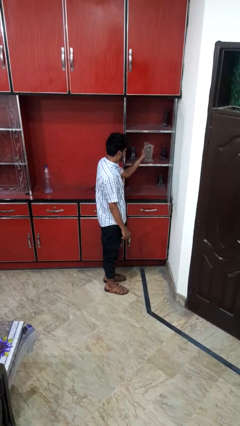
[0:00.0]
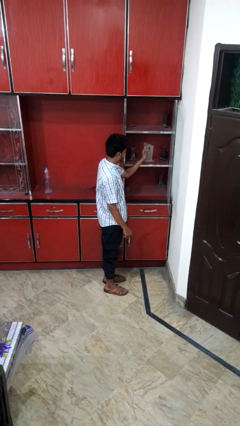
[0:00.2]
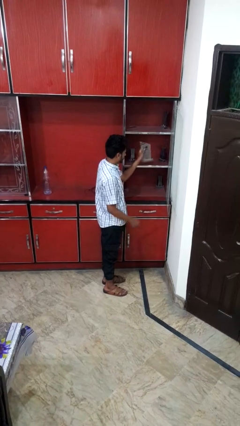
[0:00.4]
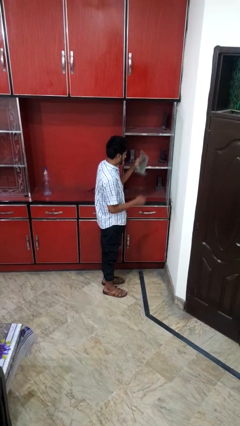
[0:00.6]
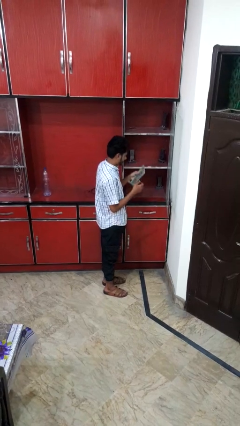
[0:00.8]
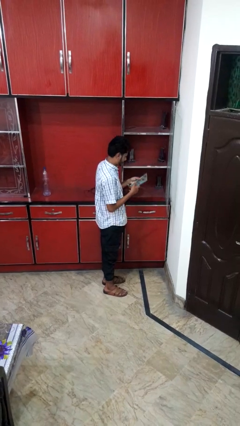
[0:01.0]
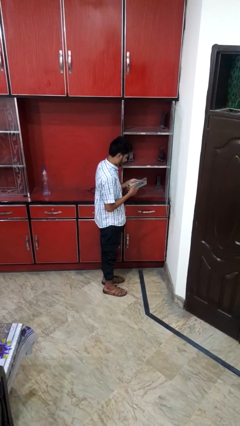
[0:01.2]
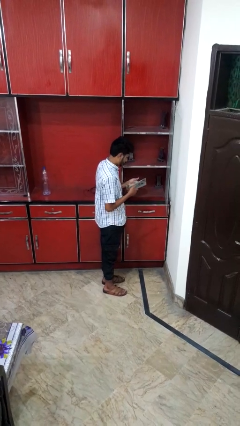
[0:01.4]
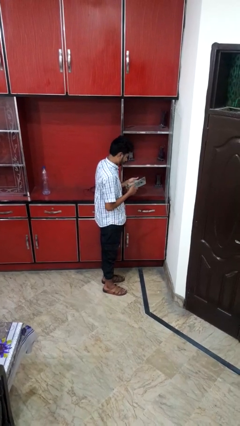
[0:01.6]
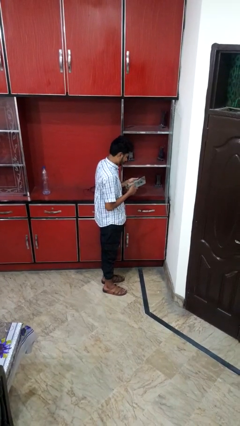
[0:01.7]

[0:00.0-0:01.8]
person picks up object from cabinet

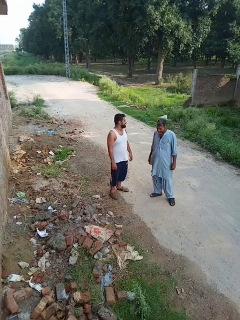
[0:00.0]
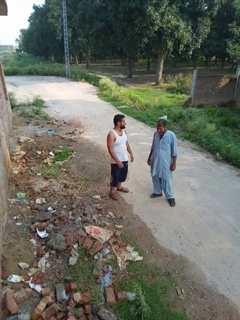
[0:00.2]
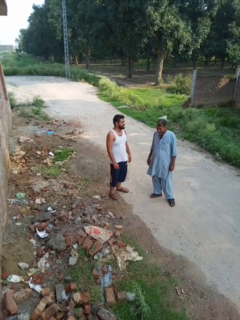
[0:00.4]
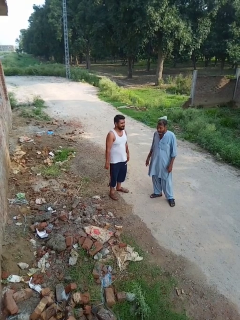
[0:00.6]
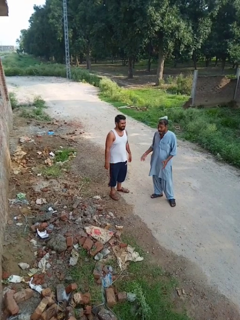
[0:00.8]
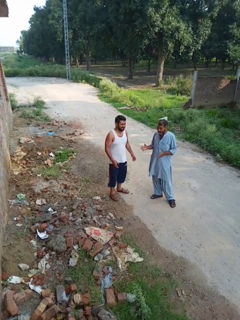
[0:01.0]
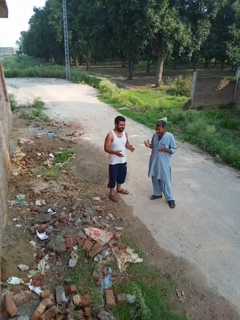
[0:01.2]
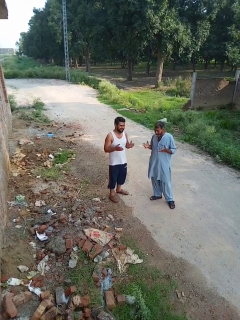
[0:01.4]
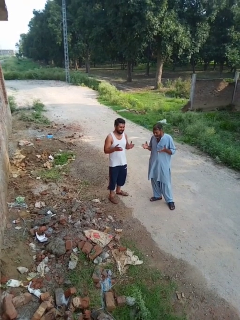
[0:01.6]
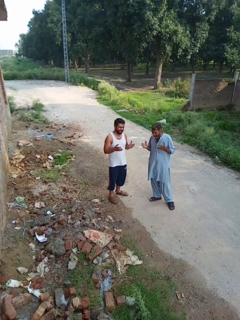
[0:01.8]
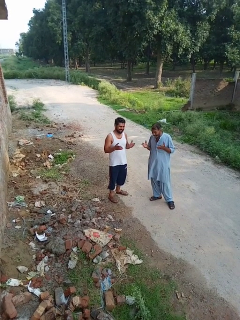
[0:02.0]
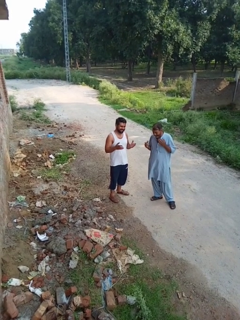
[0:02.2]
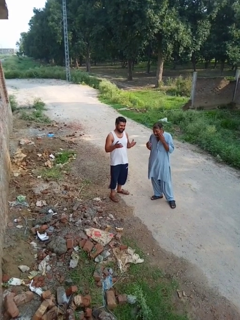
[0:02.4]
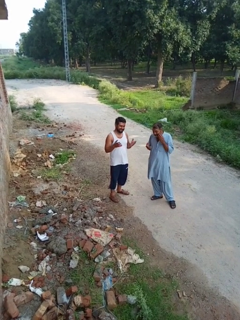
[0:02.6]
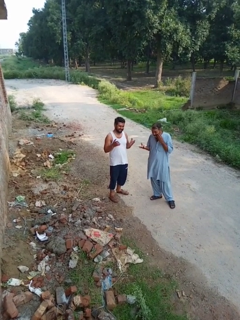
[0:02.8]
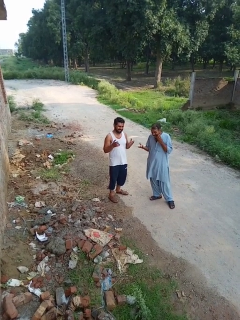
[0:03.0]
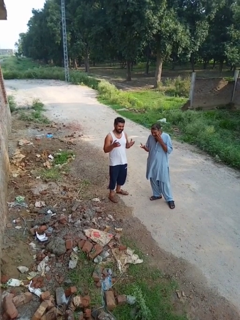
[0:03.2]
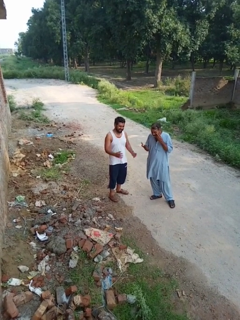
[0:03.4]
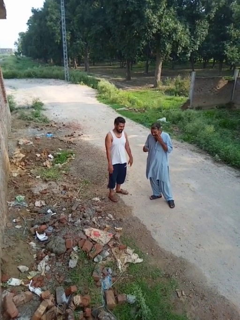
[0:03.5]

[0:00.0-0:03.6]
person laughs with person

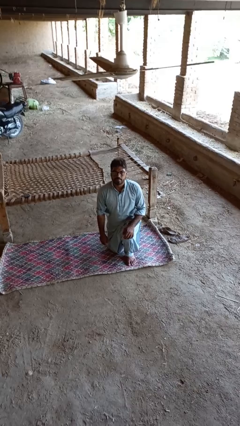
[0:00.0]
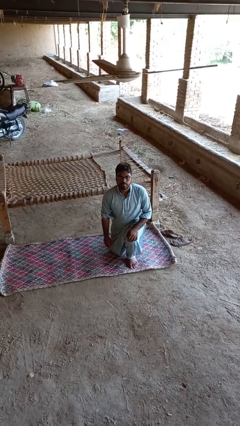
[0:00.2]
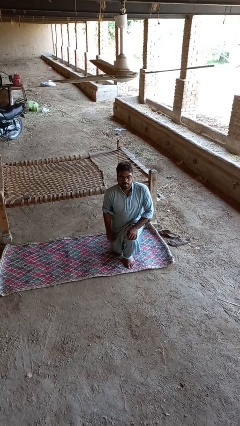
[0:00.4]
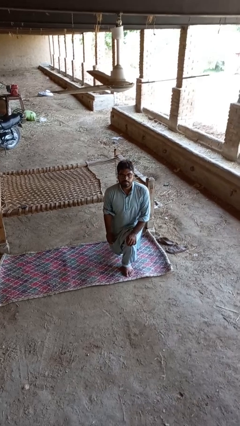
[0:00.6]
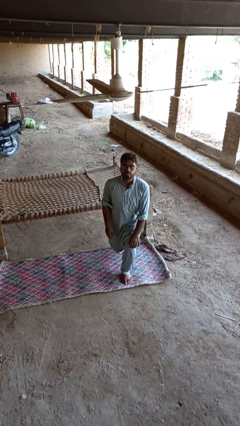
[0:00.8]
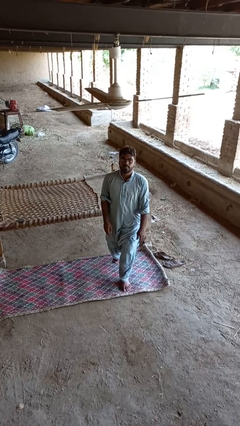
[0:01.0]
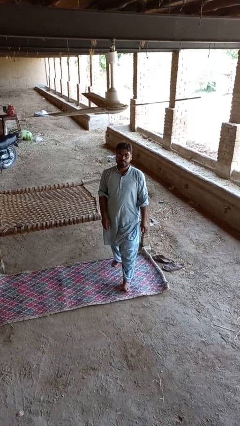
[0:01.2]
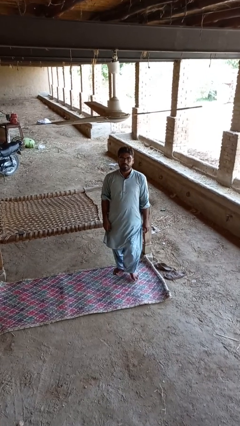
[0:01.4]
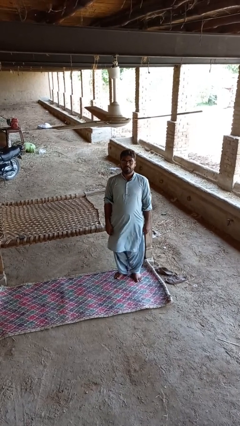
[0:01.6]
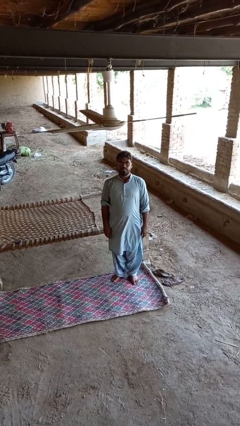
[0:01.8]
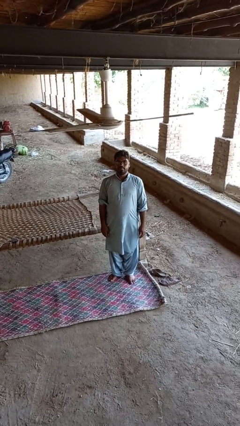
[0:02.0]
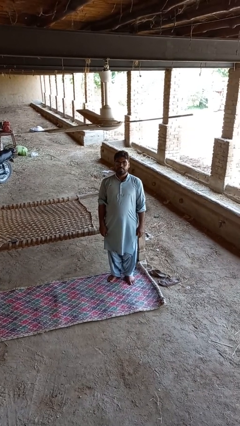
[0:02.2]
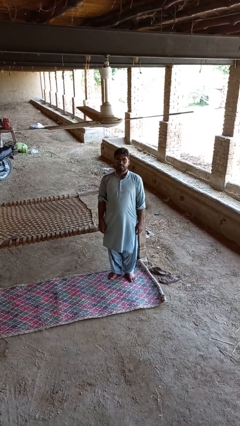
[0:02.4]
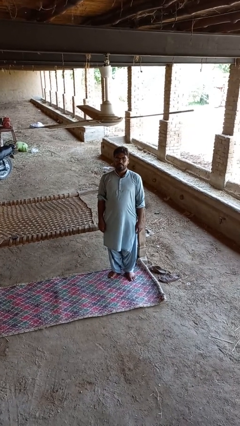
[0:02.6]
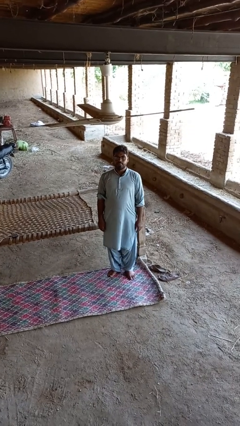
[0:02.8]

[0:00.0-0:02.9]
person stands up from floor

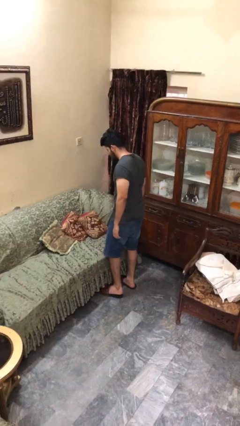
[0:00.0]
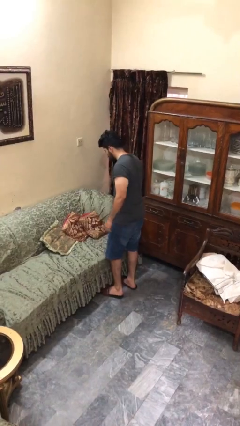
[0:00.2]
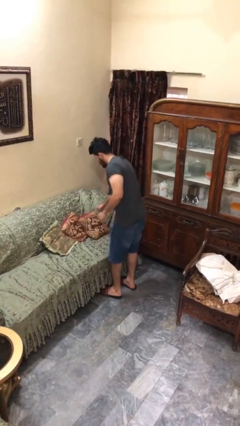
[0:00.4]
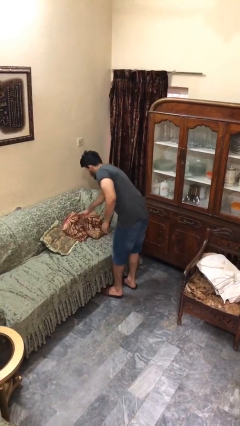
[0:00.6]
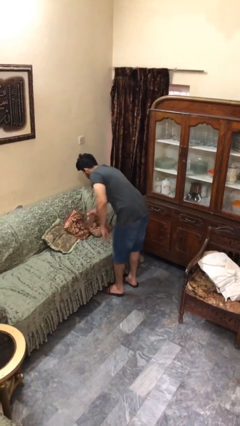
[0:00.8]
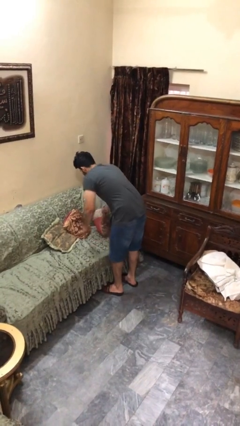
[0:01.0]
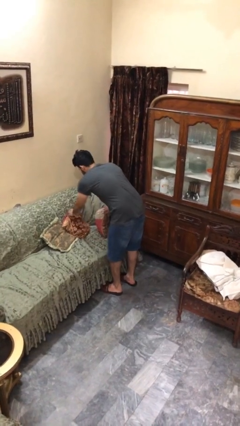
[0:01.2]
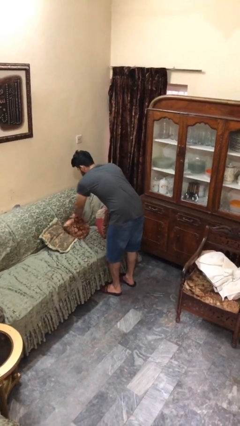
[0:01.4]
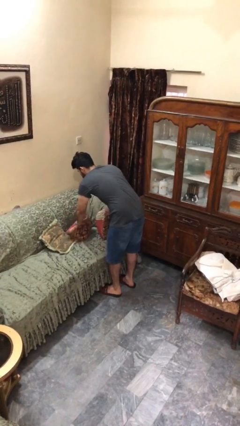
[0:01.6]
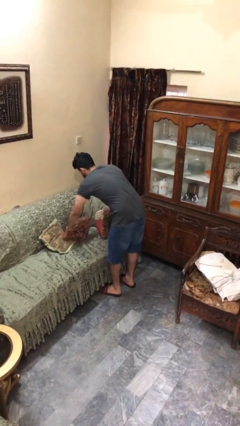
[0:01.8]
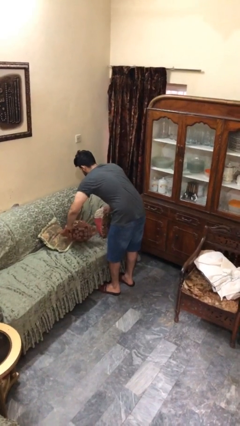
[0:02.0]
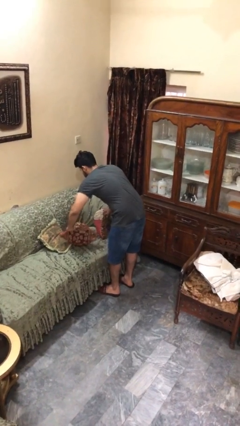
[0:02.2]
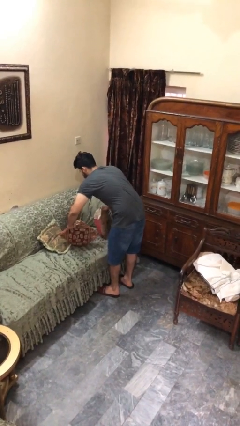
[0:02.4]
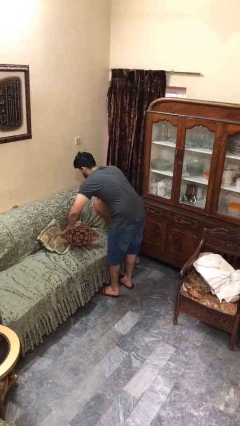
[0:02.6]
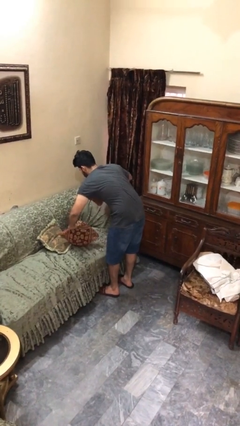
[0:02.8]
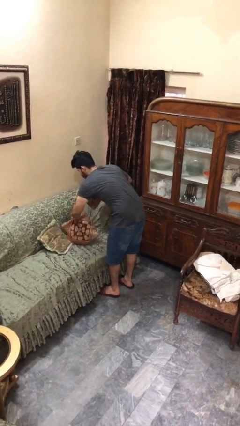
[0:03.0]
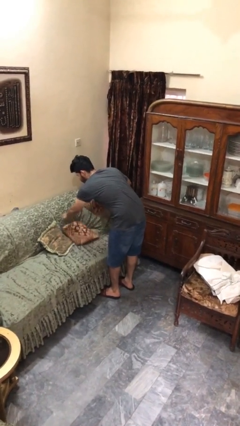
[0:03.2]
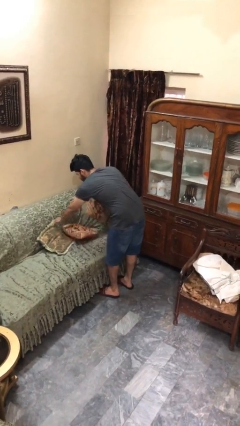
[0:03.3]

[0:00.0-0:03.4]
person searches in couch

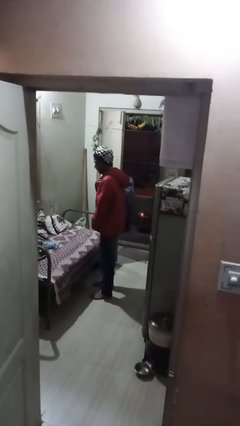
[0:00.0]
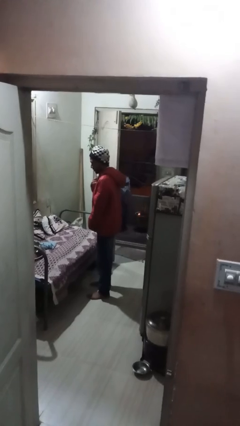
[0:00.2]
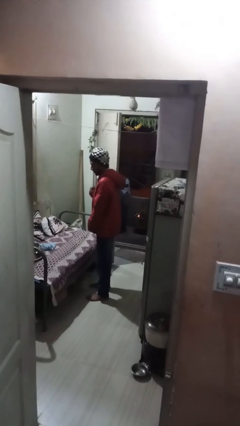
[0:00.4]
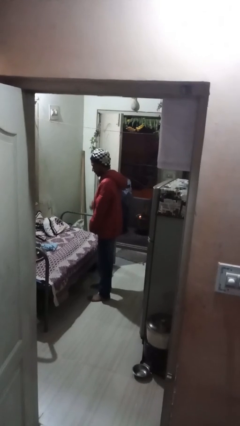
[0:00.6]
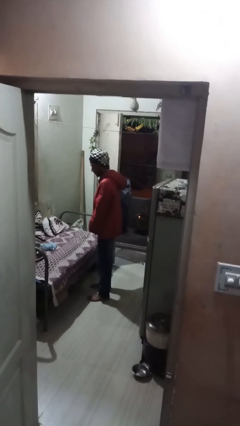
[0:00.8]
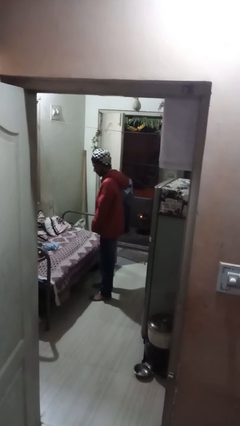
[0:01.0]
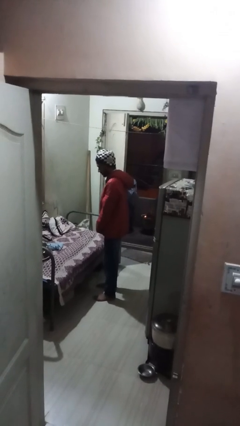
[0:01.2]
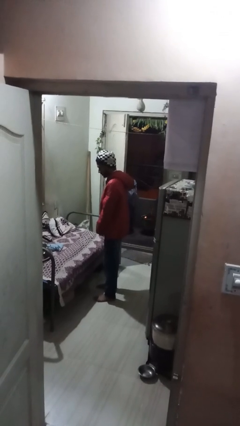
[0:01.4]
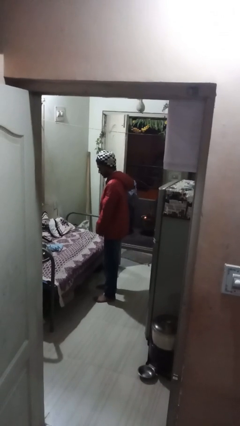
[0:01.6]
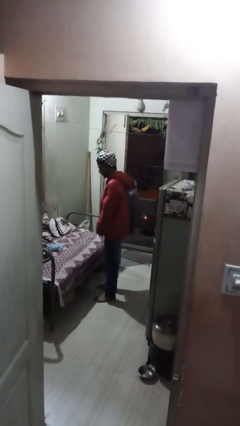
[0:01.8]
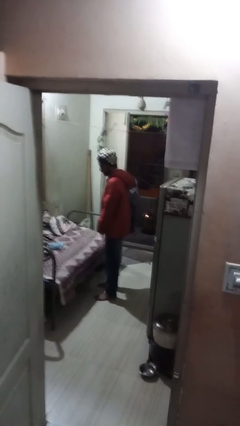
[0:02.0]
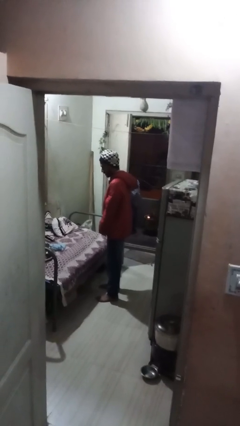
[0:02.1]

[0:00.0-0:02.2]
person unzips jacket

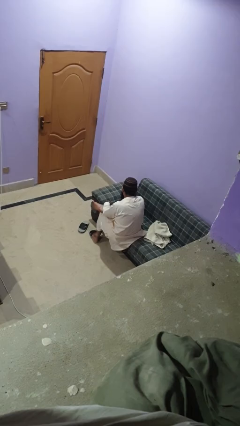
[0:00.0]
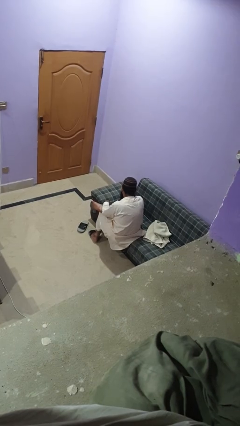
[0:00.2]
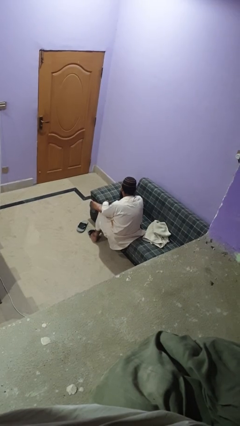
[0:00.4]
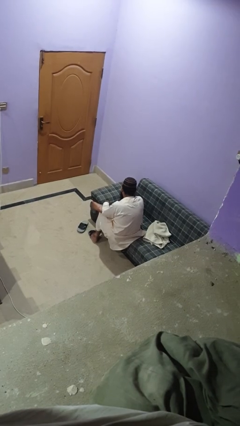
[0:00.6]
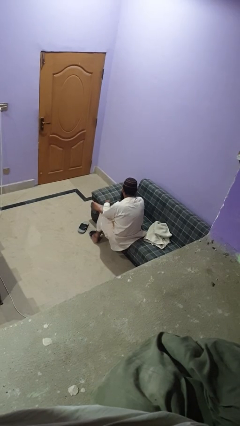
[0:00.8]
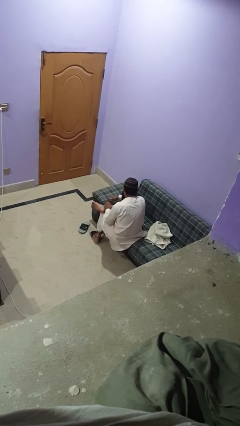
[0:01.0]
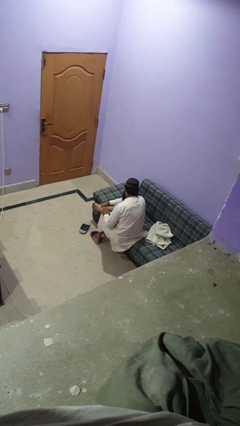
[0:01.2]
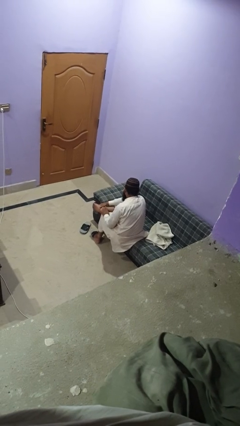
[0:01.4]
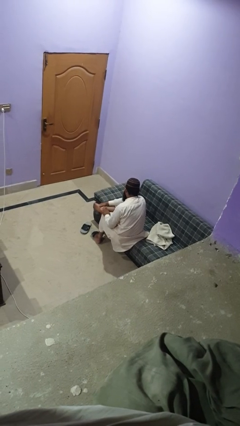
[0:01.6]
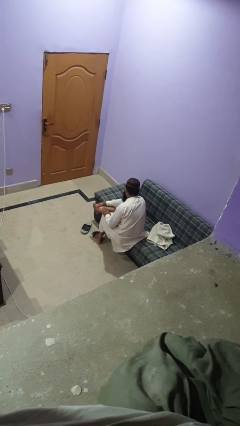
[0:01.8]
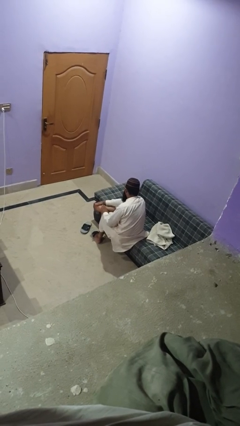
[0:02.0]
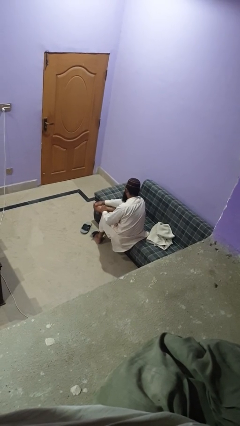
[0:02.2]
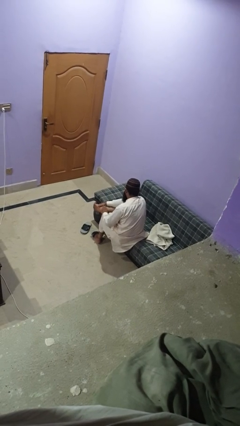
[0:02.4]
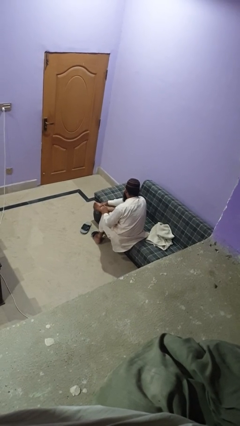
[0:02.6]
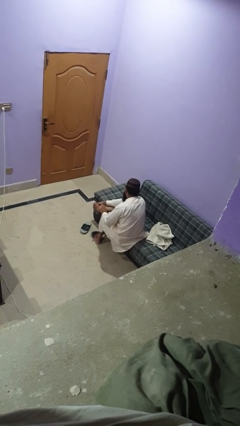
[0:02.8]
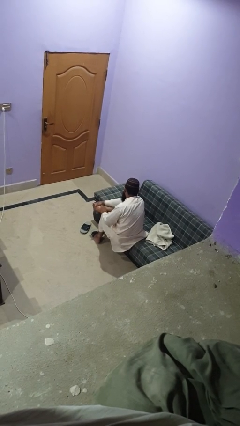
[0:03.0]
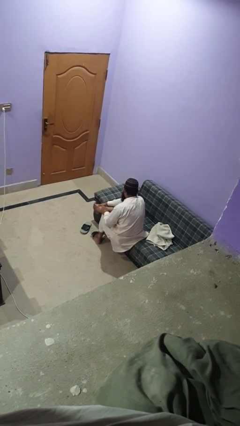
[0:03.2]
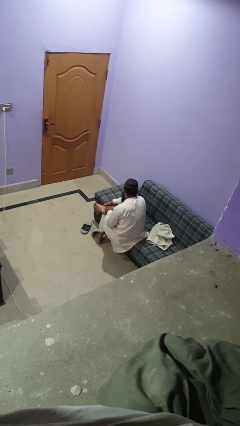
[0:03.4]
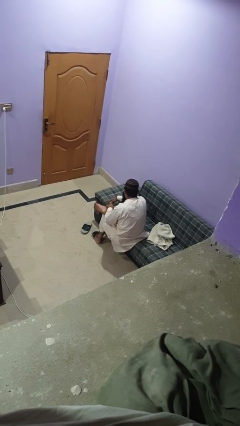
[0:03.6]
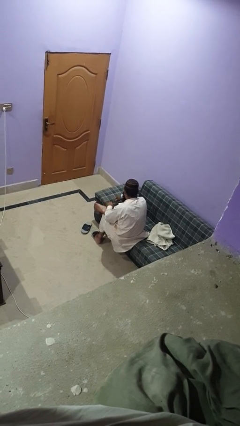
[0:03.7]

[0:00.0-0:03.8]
person rubs foot

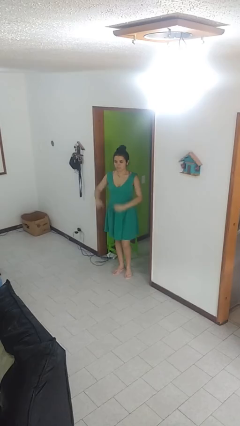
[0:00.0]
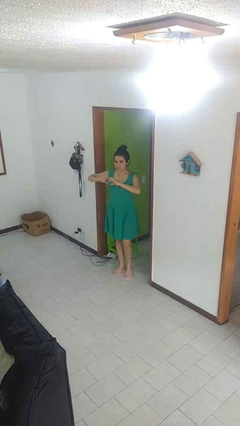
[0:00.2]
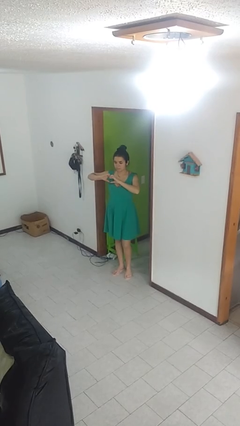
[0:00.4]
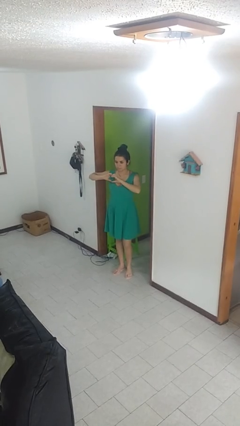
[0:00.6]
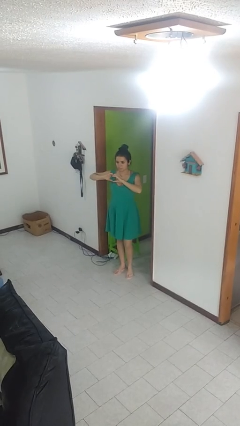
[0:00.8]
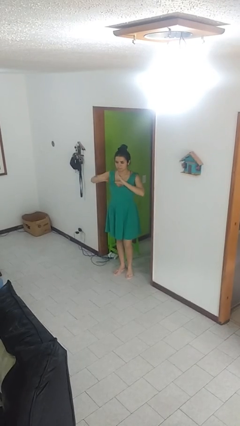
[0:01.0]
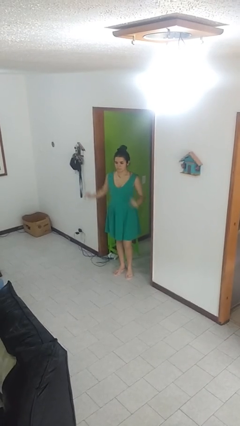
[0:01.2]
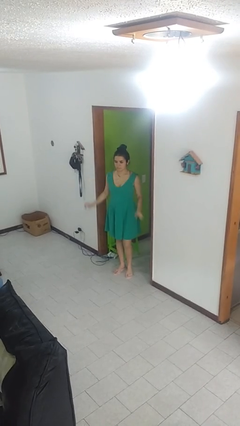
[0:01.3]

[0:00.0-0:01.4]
person gestures heart
